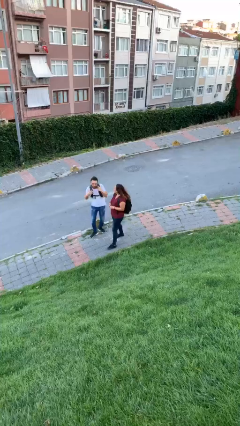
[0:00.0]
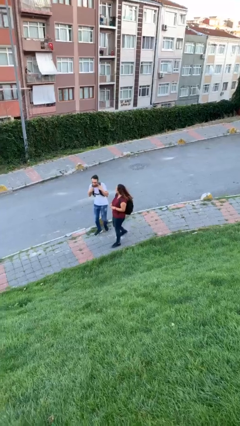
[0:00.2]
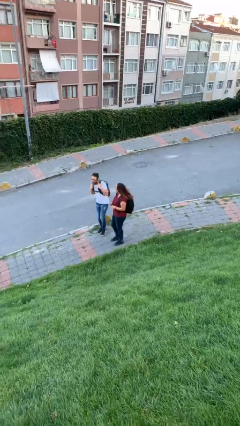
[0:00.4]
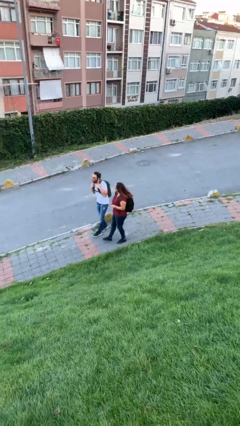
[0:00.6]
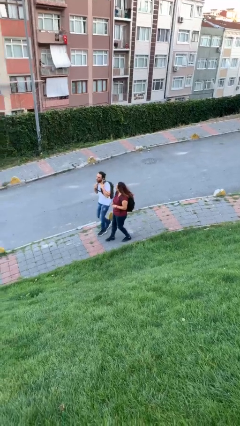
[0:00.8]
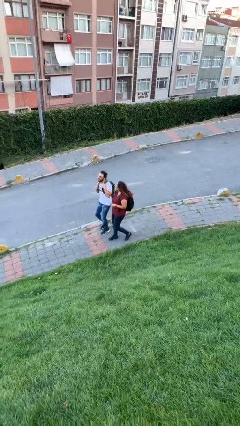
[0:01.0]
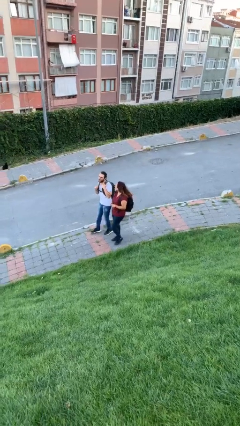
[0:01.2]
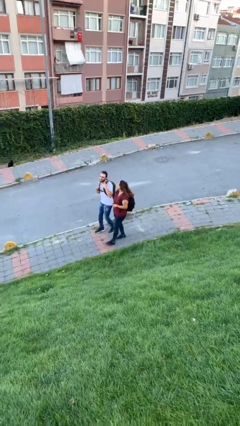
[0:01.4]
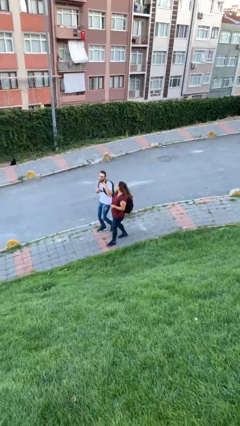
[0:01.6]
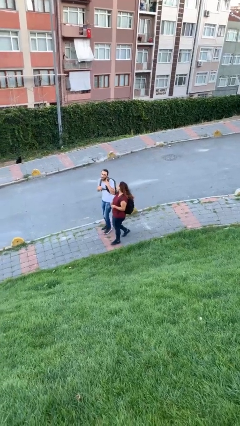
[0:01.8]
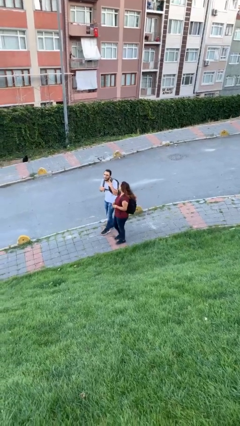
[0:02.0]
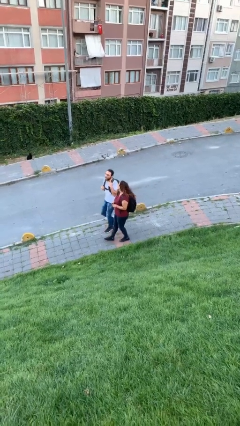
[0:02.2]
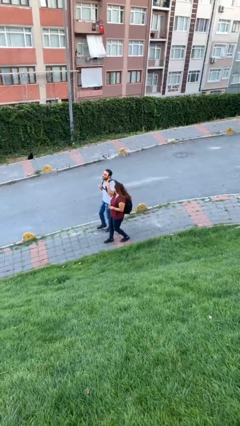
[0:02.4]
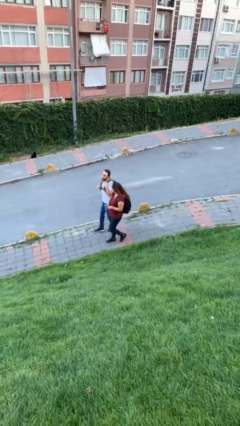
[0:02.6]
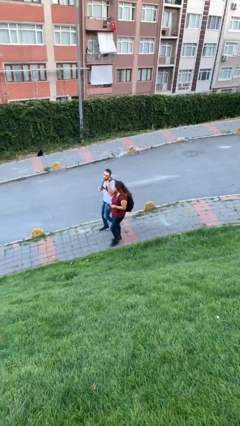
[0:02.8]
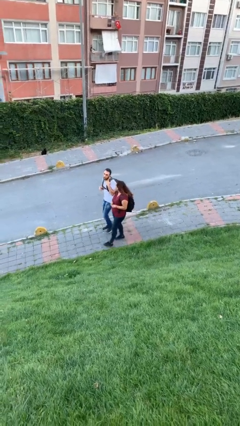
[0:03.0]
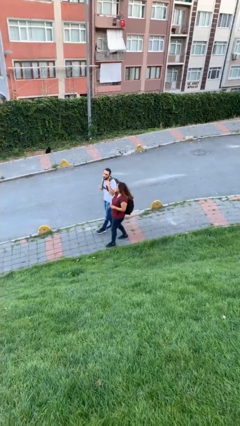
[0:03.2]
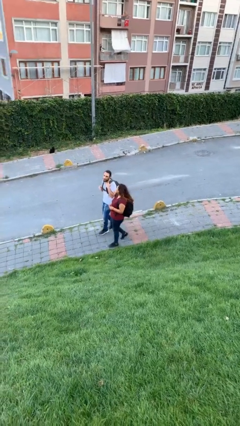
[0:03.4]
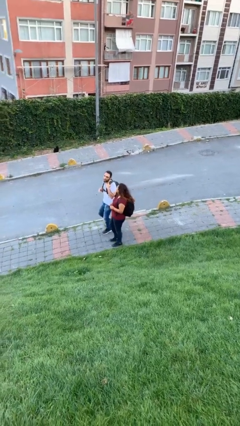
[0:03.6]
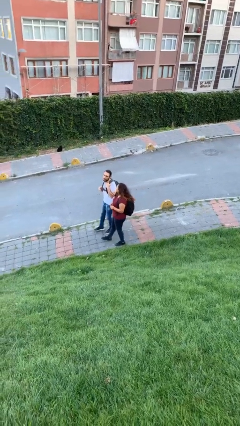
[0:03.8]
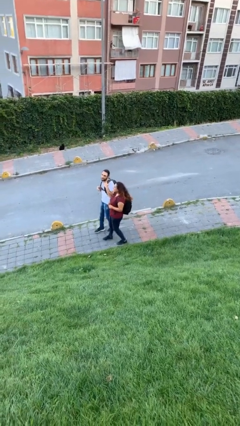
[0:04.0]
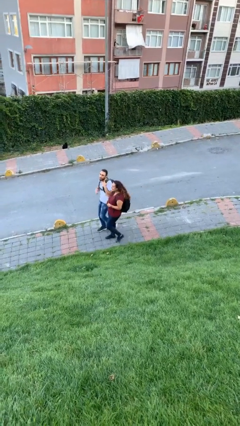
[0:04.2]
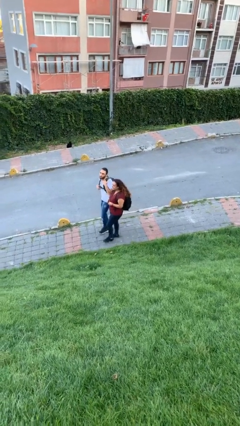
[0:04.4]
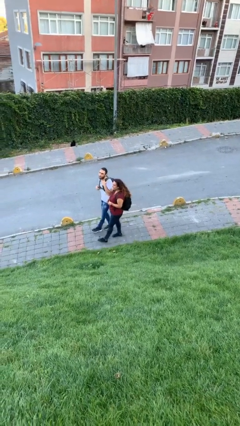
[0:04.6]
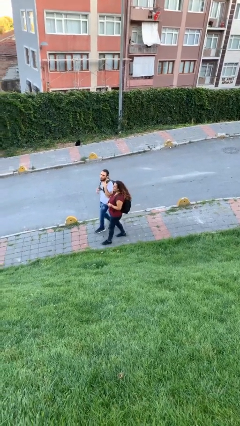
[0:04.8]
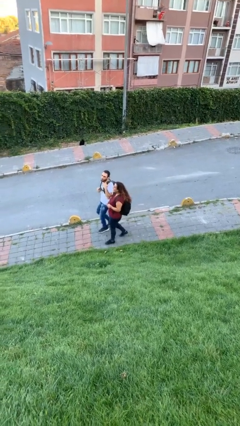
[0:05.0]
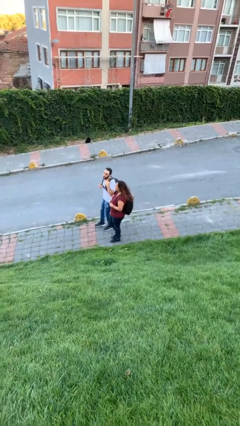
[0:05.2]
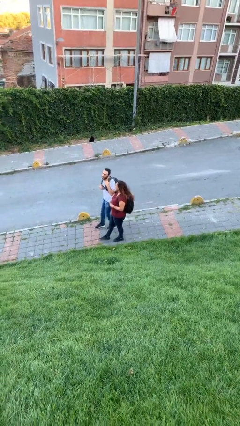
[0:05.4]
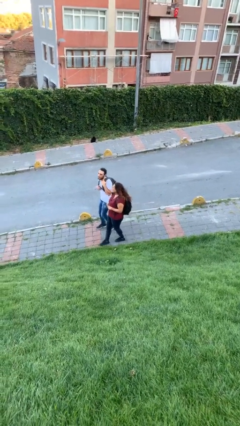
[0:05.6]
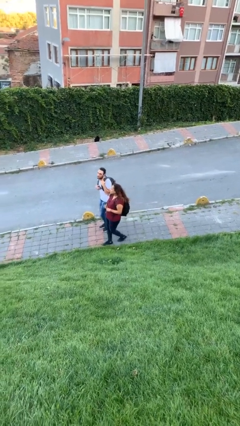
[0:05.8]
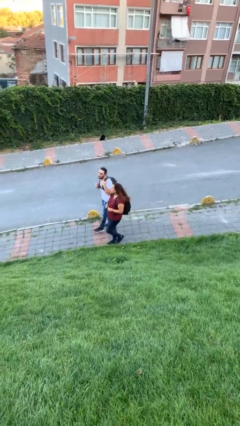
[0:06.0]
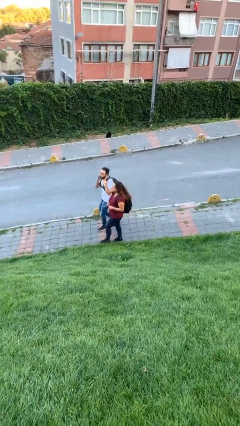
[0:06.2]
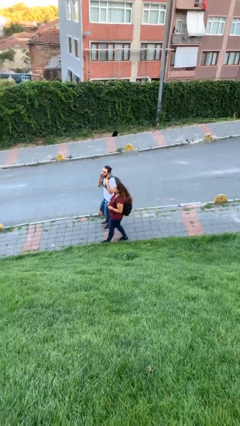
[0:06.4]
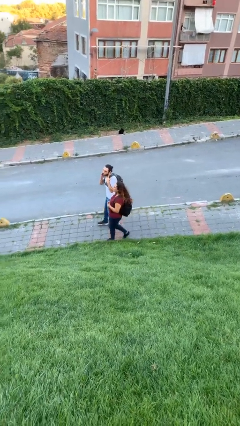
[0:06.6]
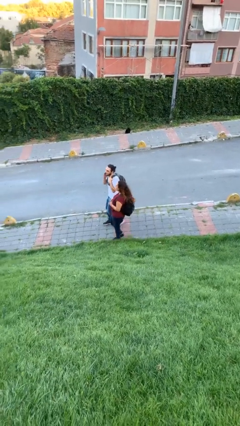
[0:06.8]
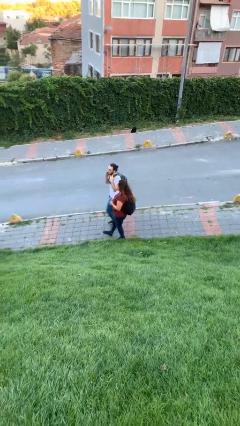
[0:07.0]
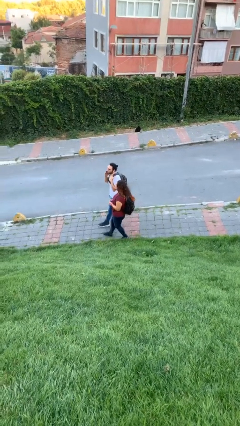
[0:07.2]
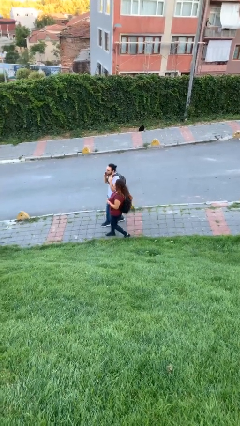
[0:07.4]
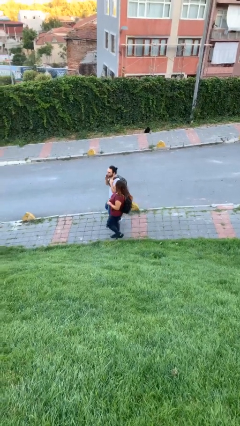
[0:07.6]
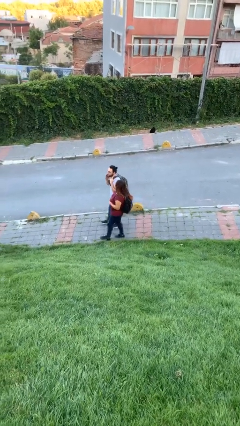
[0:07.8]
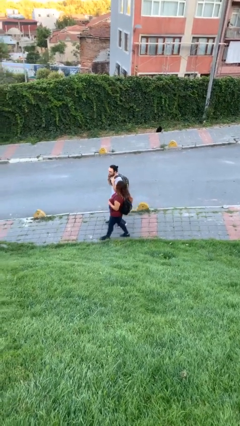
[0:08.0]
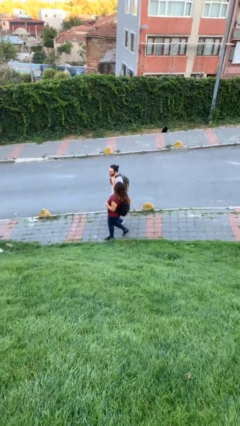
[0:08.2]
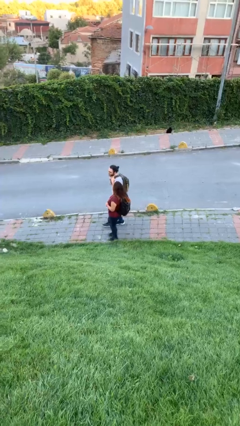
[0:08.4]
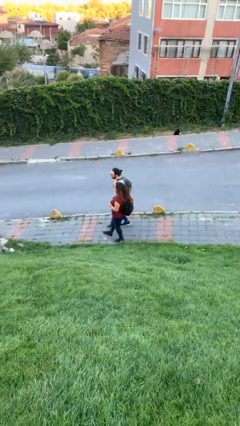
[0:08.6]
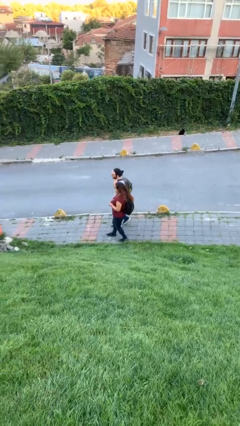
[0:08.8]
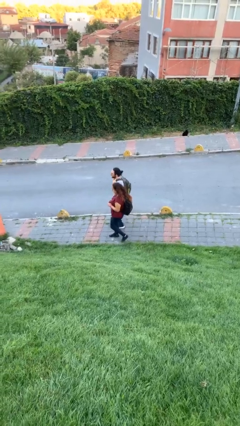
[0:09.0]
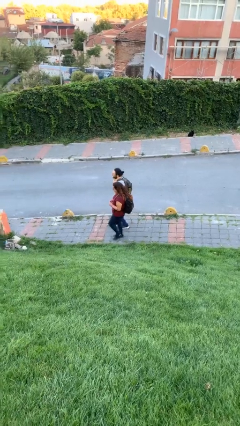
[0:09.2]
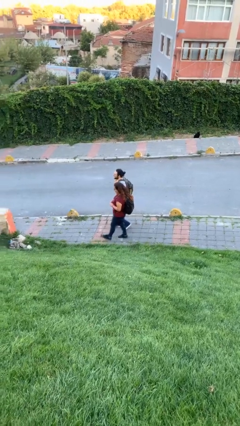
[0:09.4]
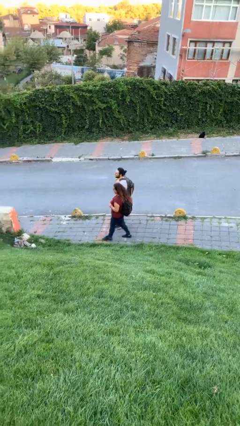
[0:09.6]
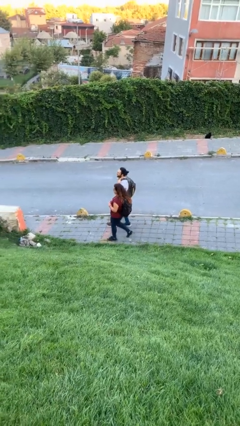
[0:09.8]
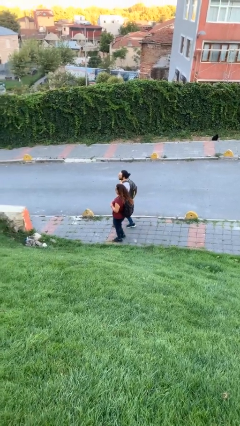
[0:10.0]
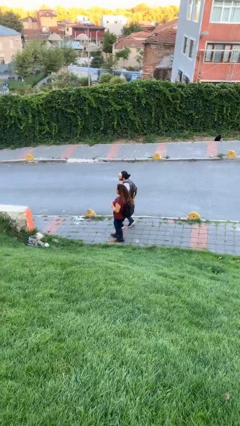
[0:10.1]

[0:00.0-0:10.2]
person talks to person

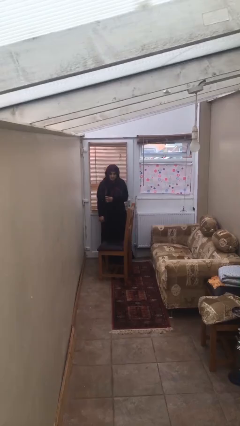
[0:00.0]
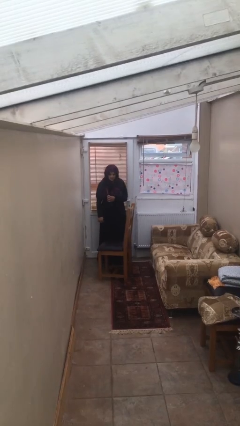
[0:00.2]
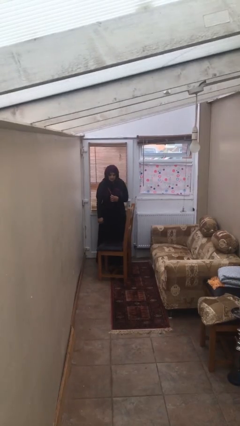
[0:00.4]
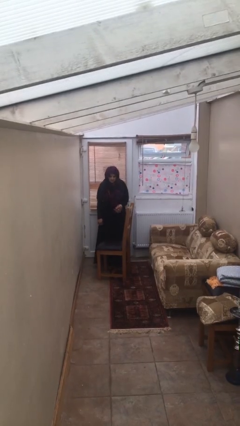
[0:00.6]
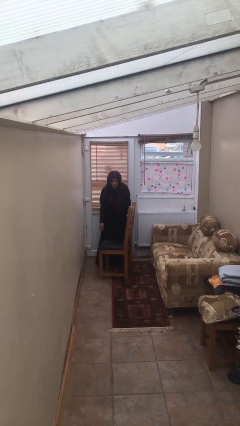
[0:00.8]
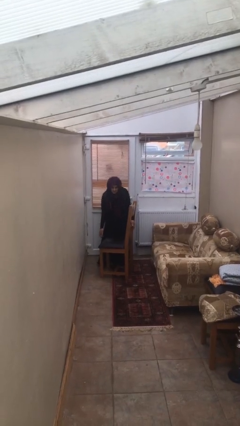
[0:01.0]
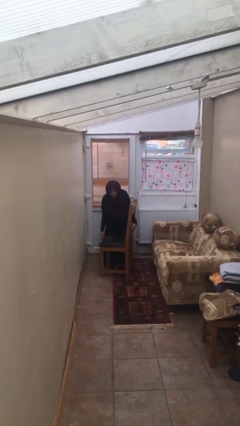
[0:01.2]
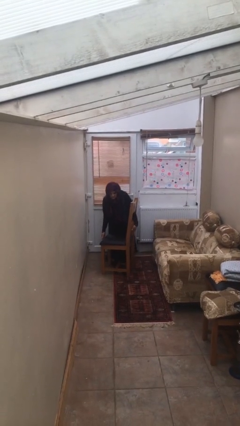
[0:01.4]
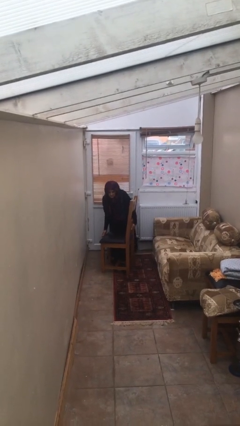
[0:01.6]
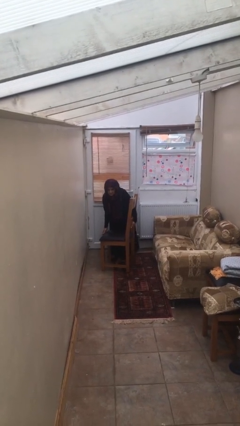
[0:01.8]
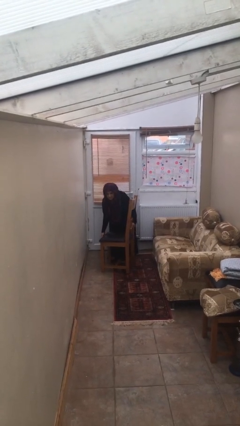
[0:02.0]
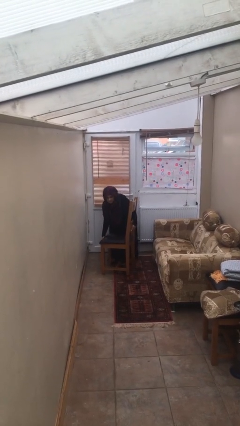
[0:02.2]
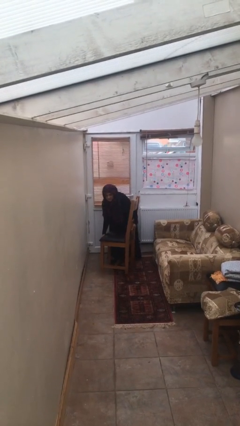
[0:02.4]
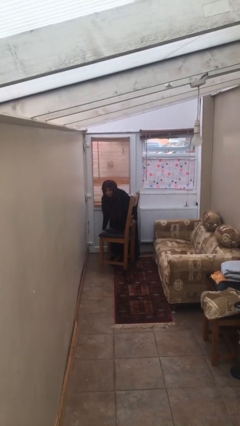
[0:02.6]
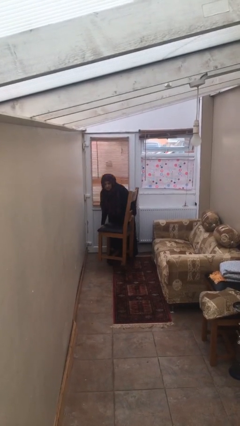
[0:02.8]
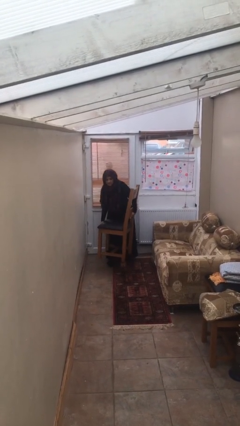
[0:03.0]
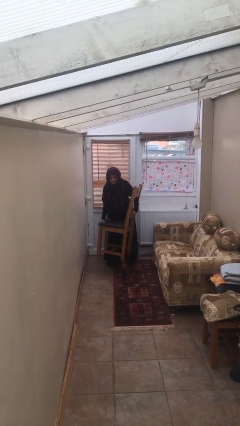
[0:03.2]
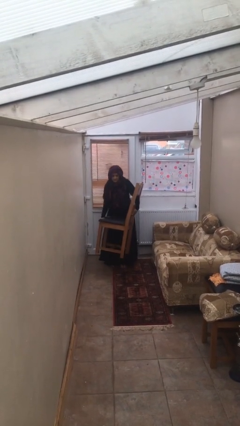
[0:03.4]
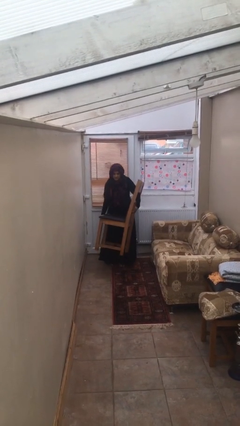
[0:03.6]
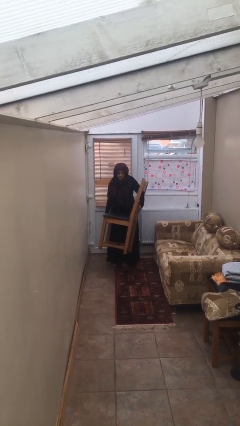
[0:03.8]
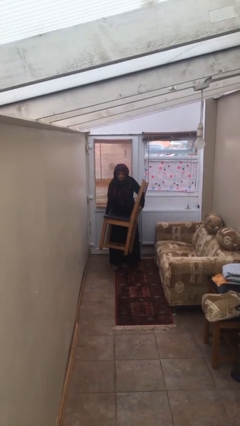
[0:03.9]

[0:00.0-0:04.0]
person picks up object from floor

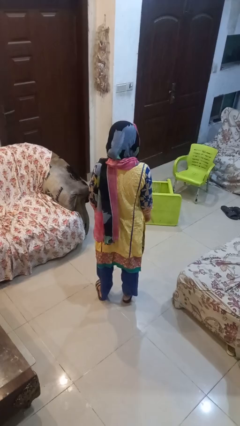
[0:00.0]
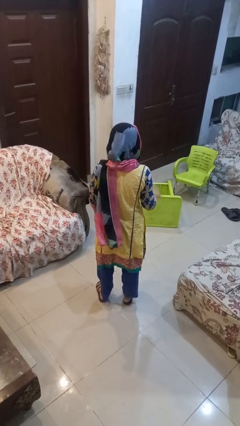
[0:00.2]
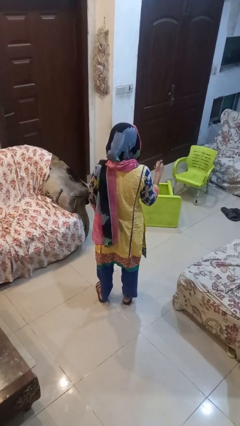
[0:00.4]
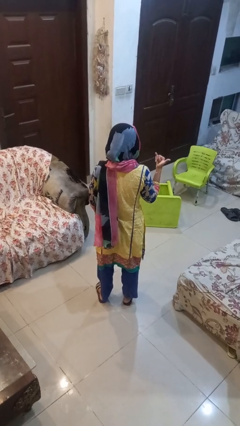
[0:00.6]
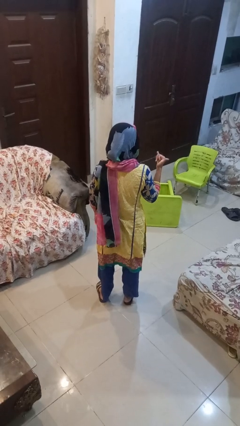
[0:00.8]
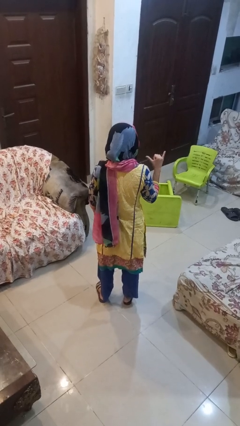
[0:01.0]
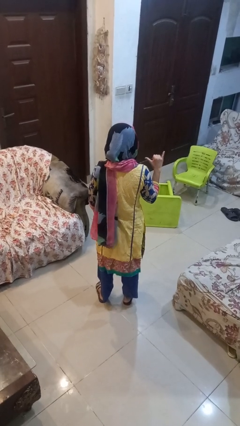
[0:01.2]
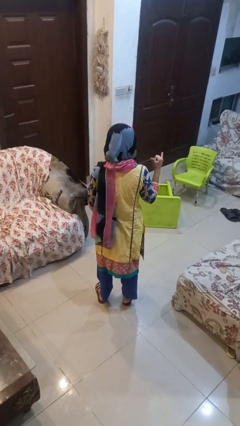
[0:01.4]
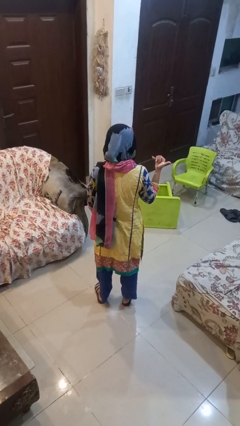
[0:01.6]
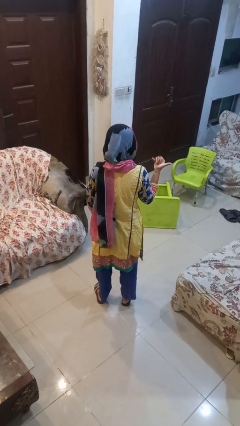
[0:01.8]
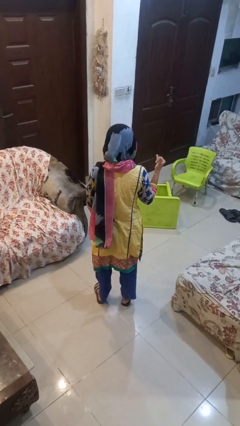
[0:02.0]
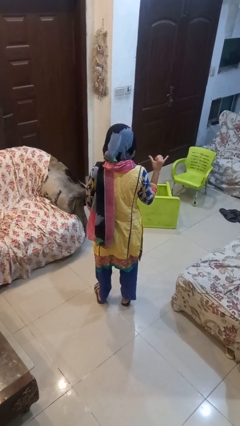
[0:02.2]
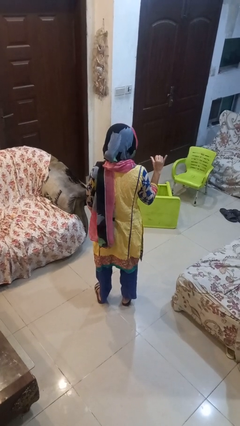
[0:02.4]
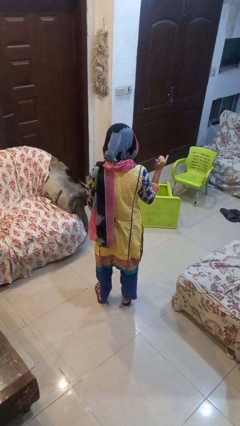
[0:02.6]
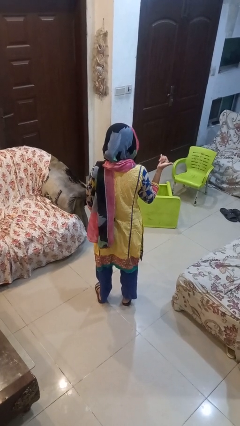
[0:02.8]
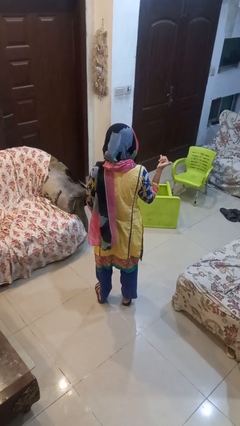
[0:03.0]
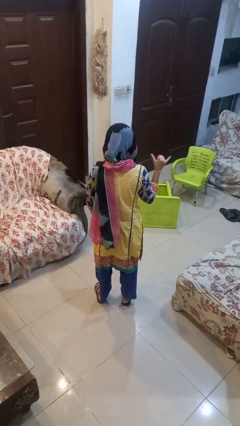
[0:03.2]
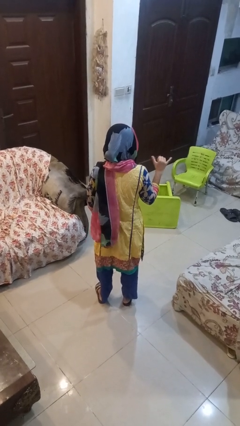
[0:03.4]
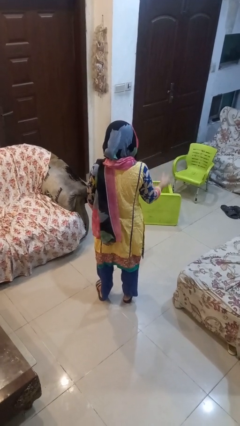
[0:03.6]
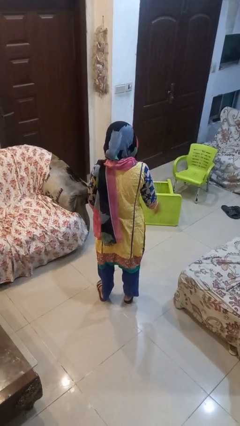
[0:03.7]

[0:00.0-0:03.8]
person gestures hang loose
